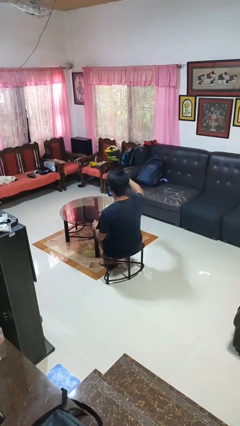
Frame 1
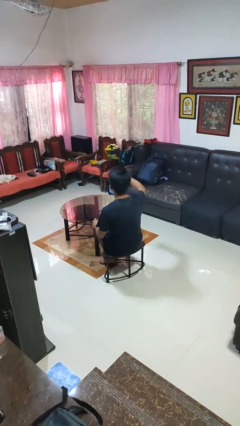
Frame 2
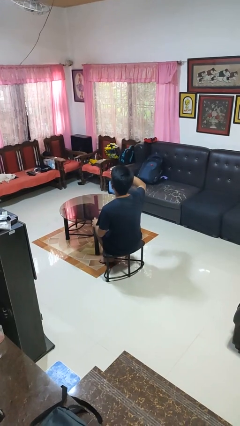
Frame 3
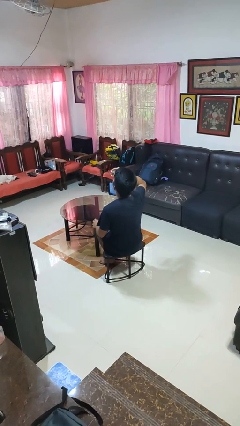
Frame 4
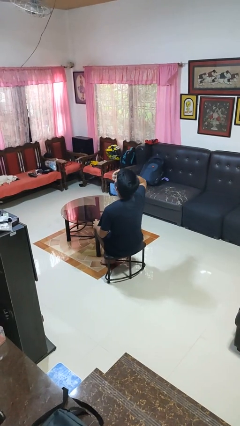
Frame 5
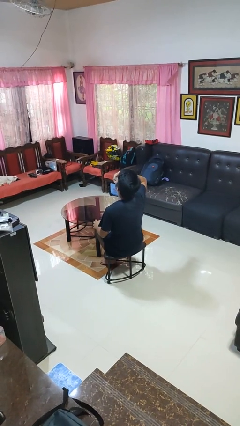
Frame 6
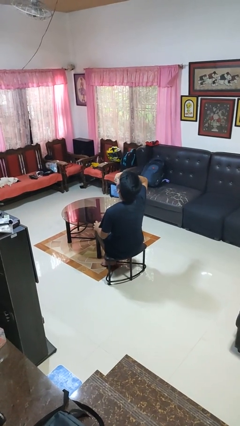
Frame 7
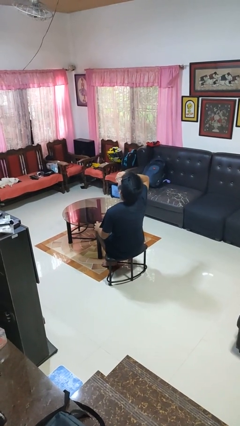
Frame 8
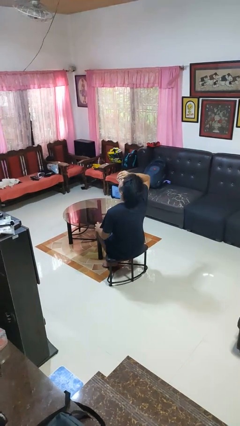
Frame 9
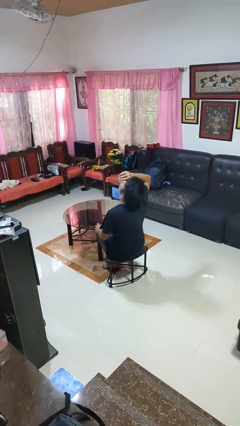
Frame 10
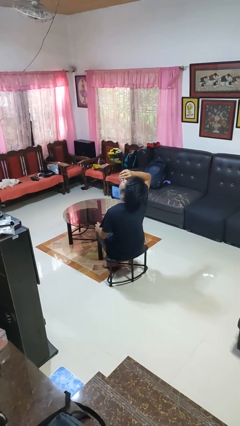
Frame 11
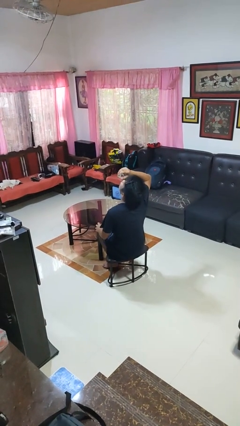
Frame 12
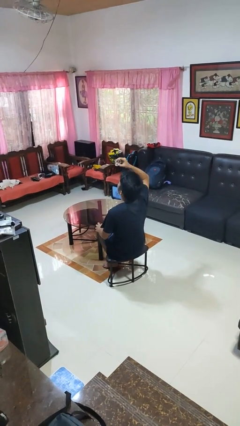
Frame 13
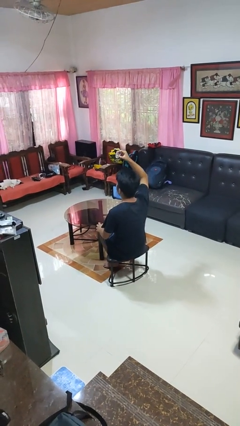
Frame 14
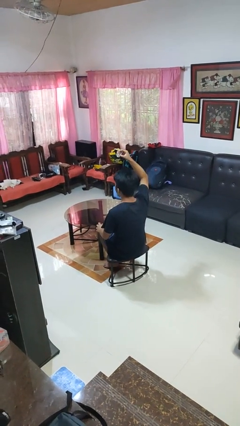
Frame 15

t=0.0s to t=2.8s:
person drinks from shotglass

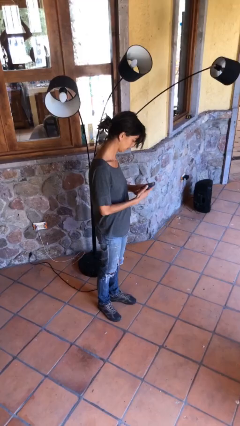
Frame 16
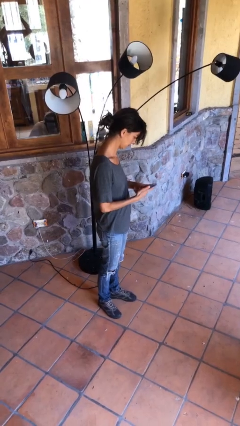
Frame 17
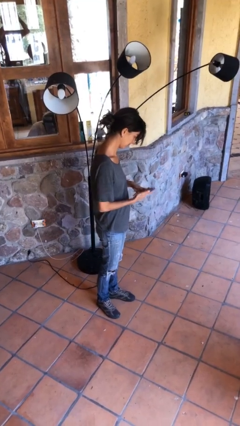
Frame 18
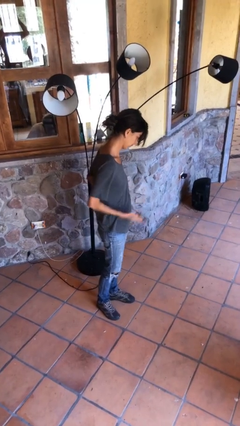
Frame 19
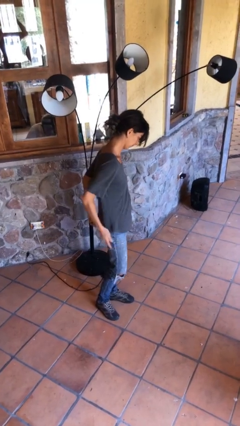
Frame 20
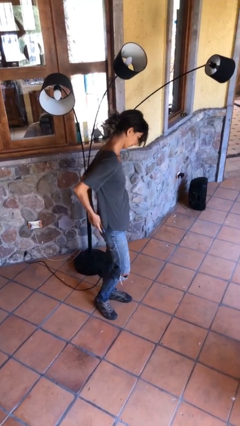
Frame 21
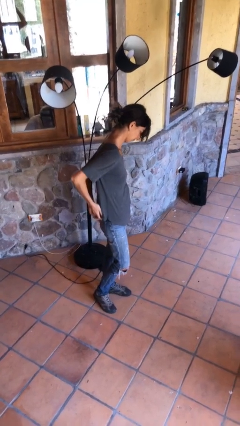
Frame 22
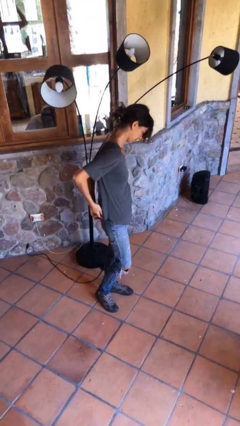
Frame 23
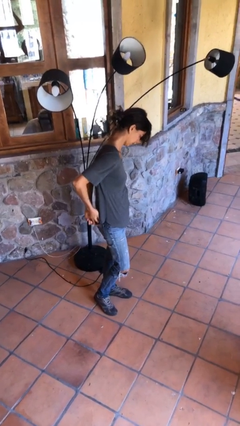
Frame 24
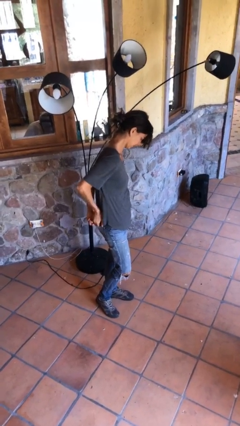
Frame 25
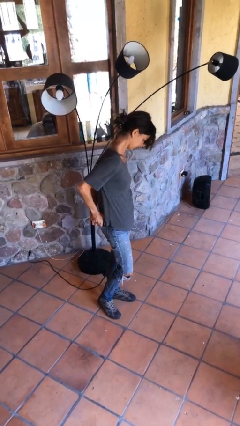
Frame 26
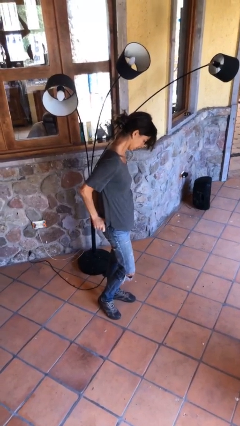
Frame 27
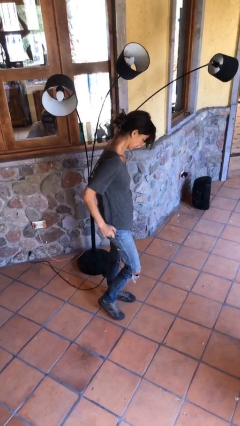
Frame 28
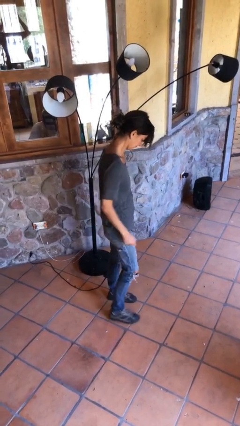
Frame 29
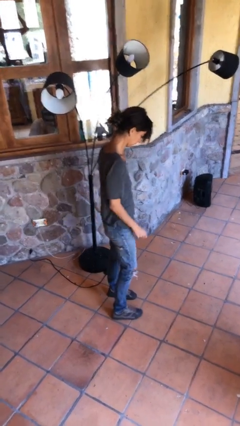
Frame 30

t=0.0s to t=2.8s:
person puts phone into pocket

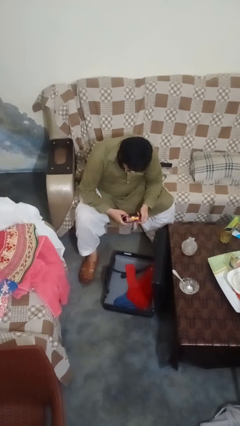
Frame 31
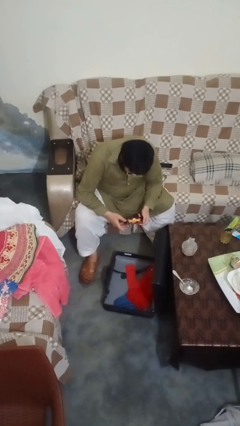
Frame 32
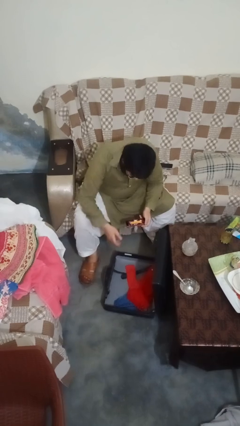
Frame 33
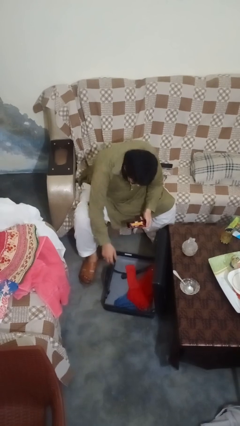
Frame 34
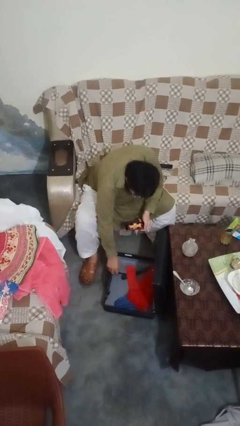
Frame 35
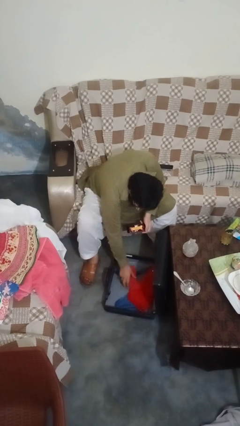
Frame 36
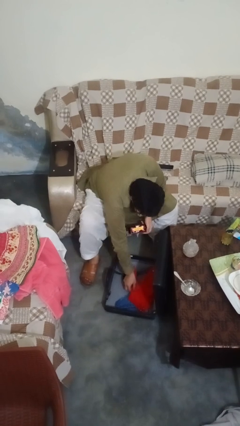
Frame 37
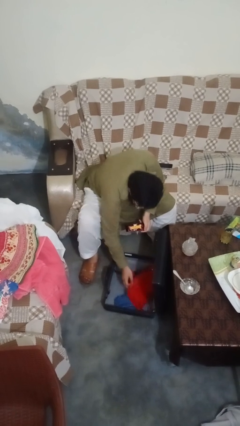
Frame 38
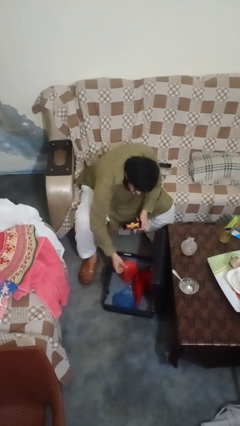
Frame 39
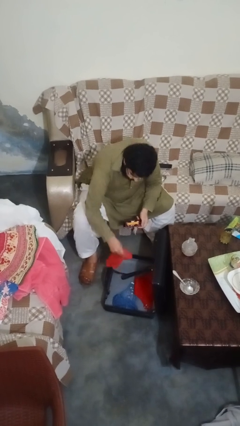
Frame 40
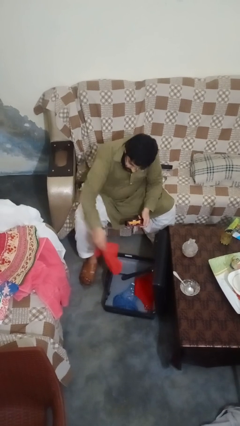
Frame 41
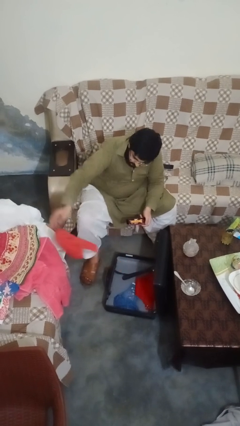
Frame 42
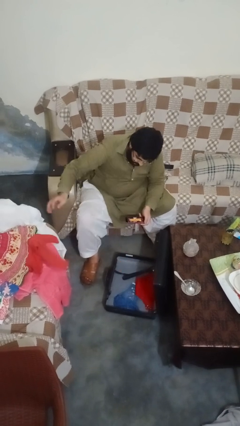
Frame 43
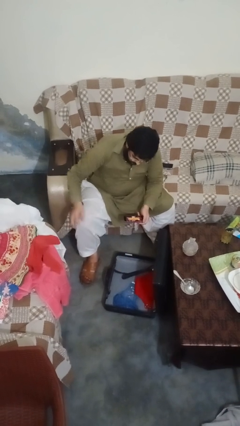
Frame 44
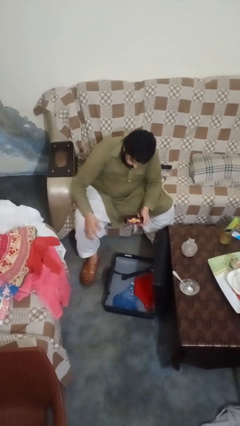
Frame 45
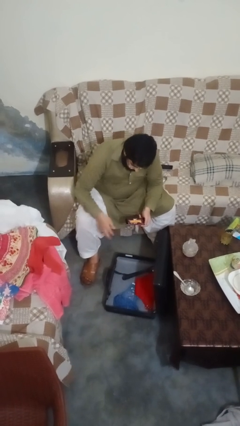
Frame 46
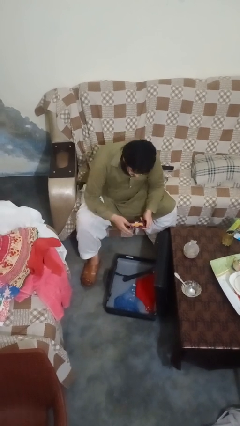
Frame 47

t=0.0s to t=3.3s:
person unloads clothes from suitcase

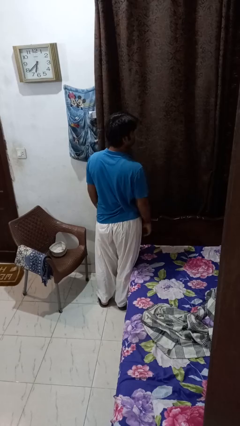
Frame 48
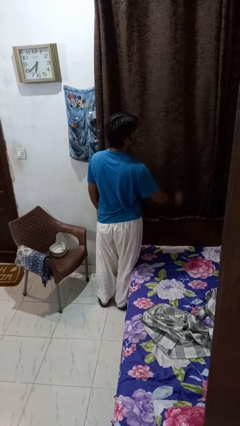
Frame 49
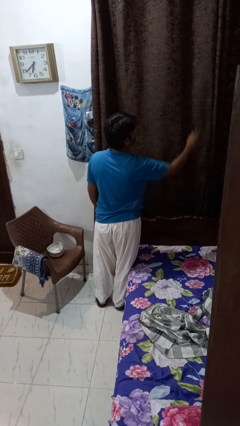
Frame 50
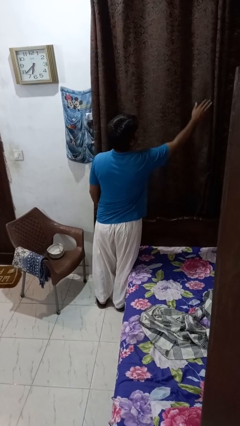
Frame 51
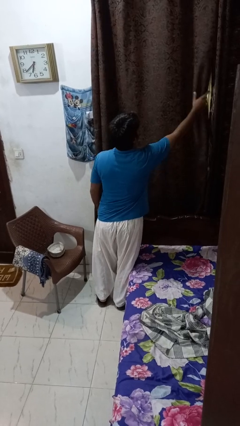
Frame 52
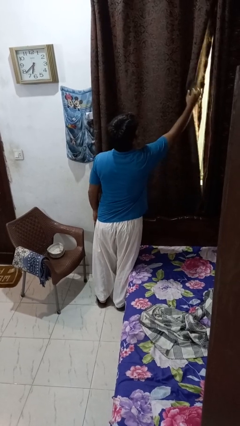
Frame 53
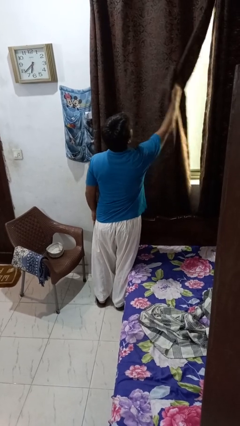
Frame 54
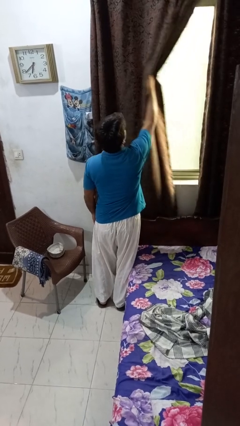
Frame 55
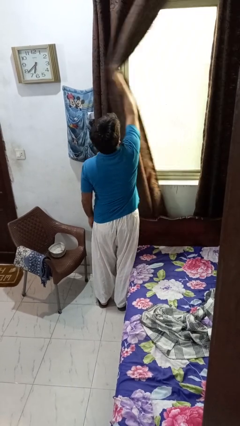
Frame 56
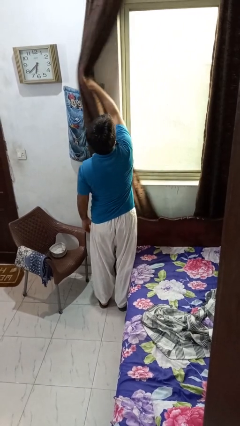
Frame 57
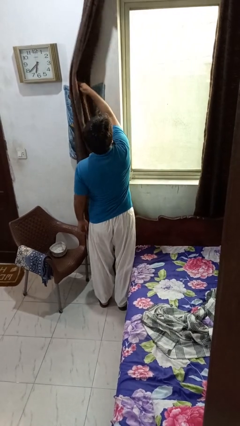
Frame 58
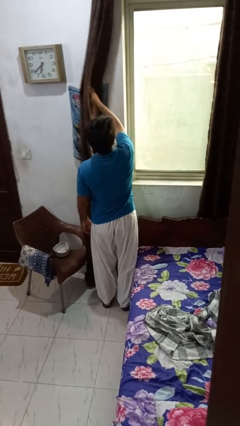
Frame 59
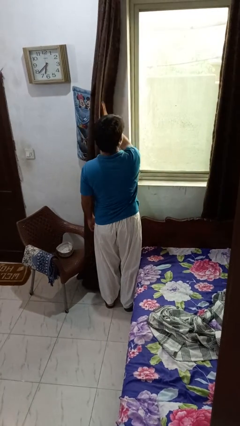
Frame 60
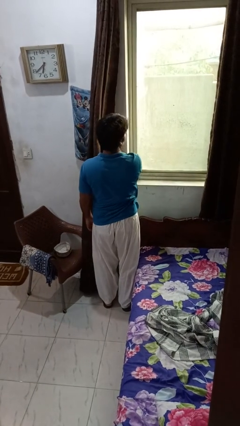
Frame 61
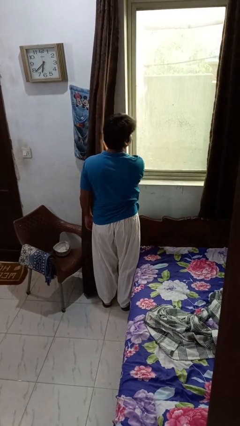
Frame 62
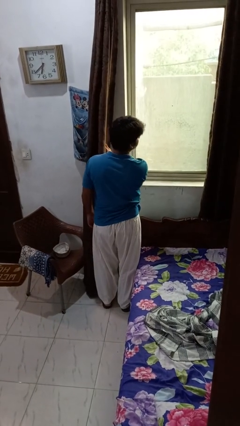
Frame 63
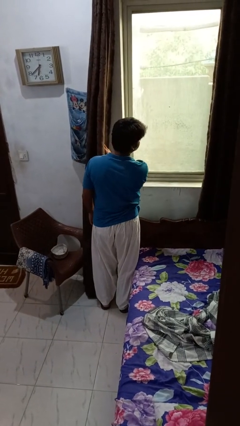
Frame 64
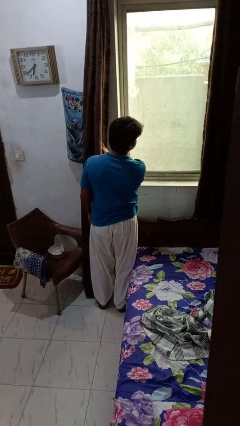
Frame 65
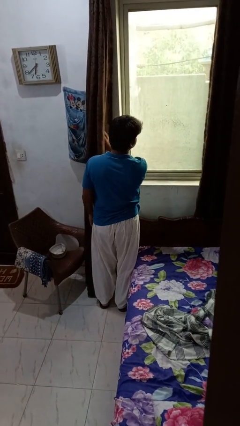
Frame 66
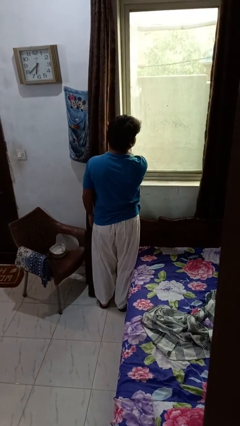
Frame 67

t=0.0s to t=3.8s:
person opens curtains

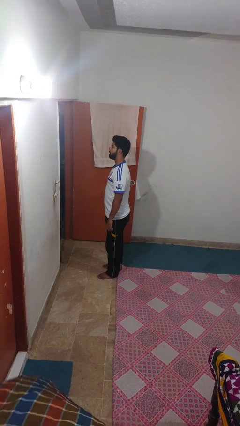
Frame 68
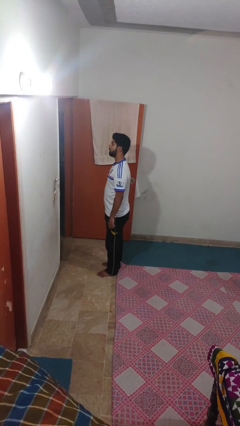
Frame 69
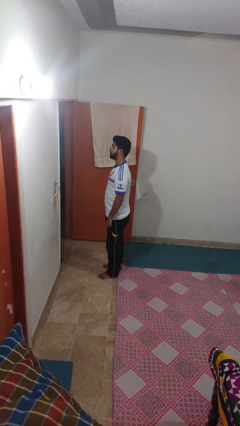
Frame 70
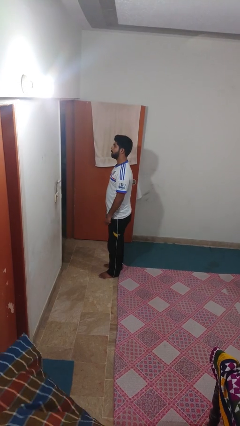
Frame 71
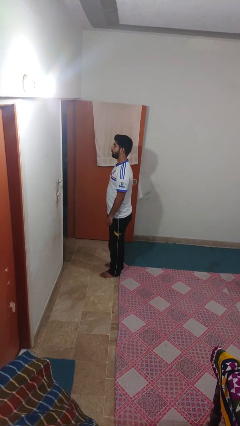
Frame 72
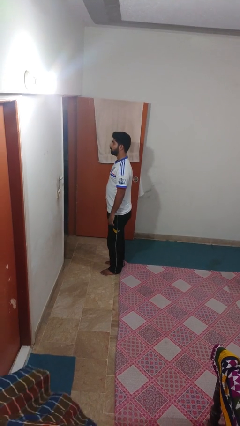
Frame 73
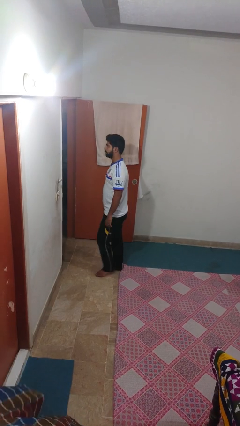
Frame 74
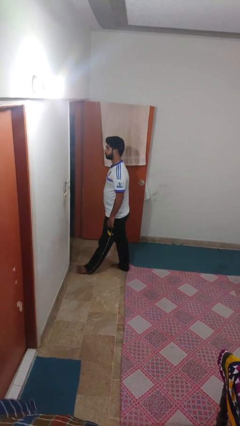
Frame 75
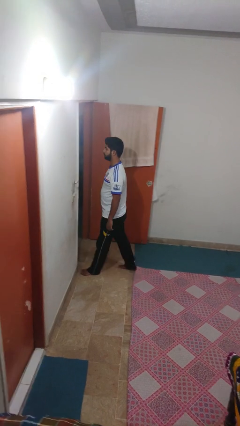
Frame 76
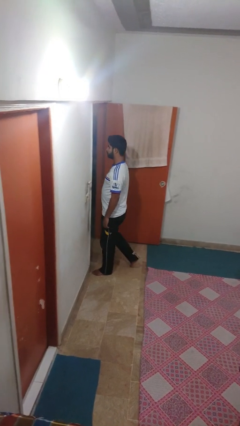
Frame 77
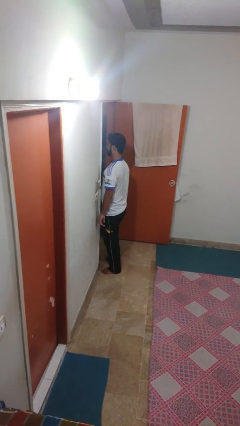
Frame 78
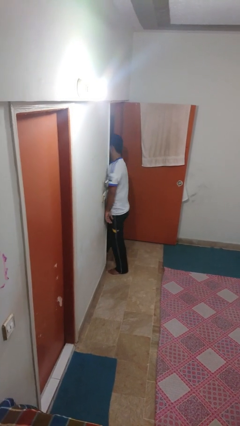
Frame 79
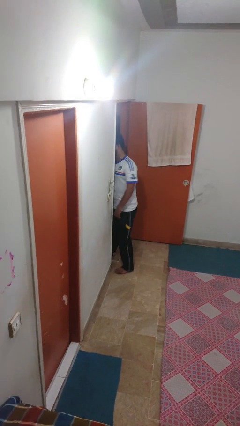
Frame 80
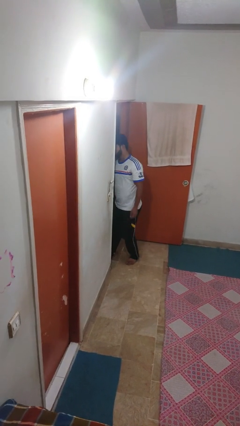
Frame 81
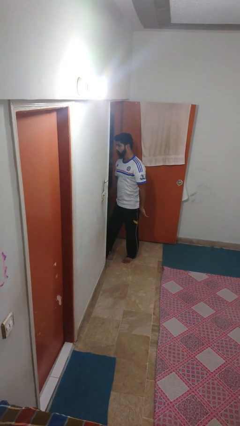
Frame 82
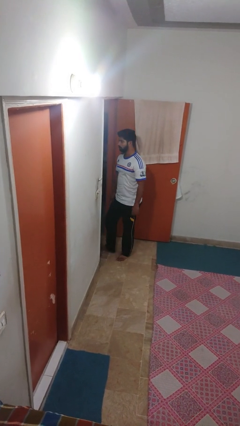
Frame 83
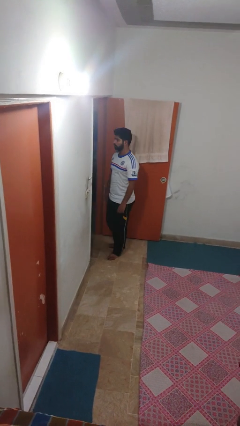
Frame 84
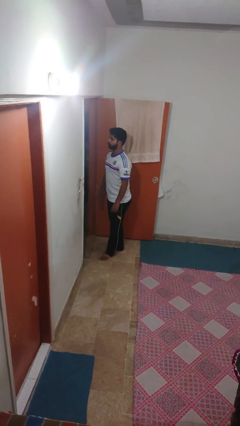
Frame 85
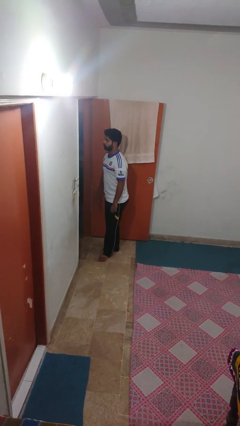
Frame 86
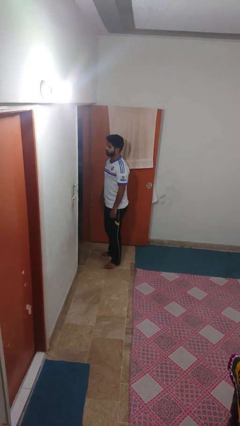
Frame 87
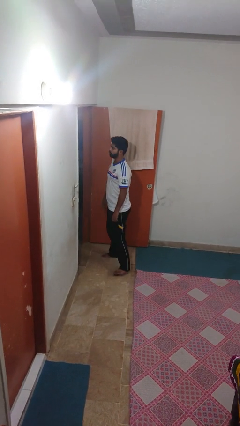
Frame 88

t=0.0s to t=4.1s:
person bumps into wall

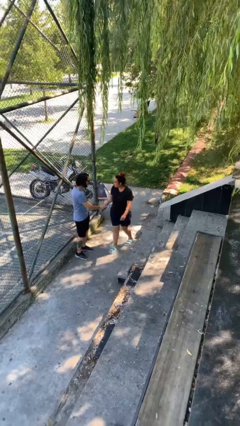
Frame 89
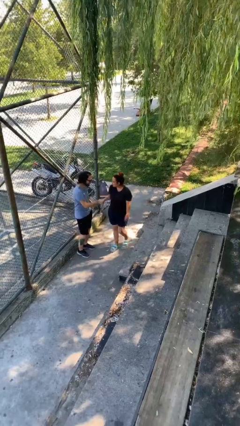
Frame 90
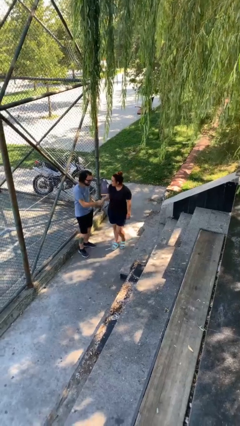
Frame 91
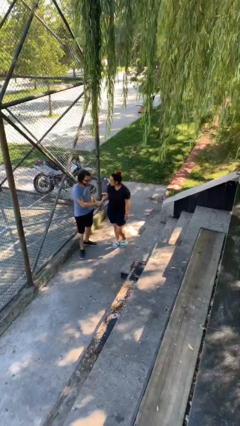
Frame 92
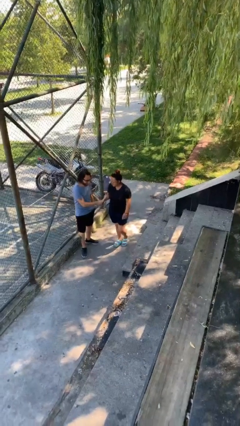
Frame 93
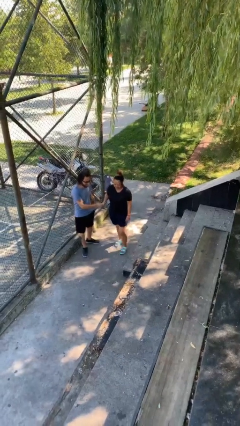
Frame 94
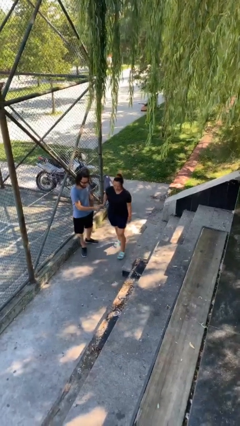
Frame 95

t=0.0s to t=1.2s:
person shakes hand
